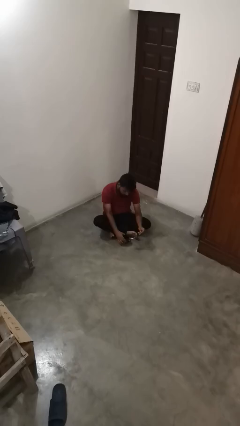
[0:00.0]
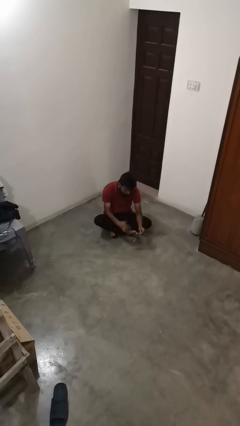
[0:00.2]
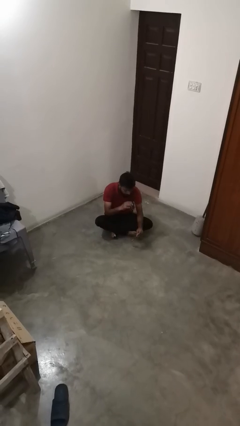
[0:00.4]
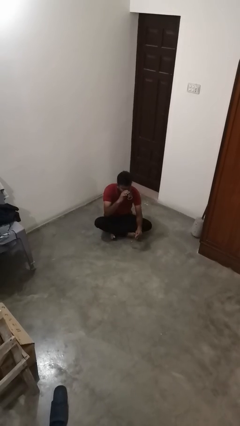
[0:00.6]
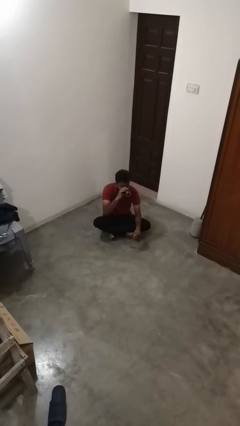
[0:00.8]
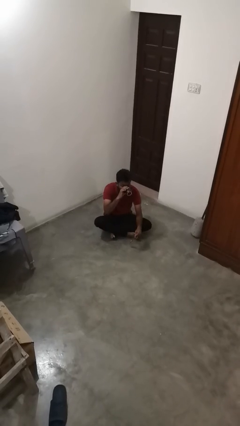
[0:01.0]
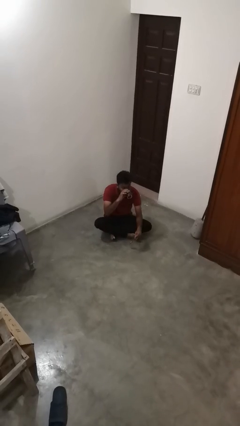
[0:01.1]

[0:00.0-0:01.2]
person drinks from mug

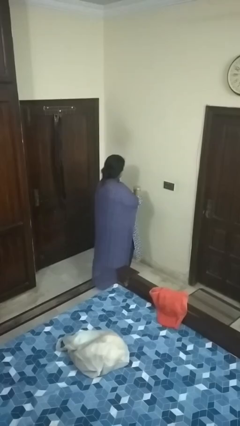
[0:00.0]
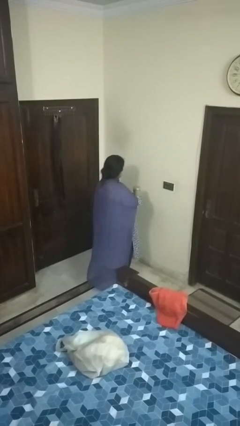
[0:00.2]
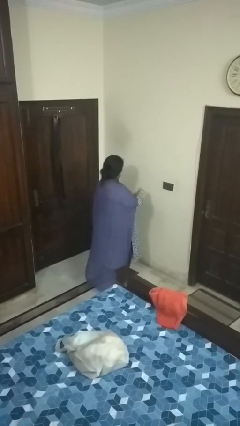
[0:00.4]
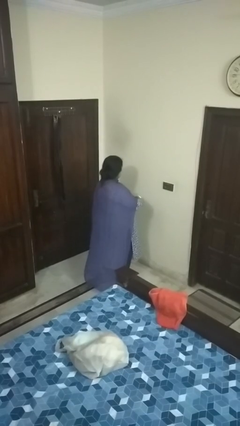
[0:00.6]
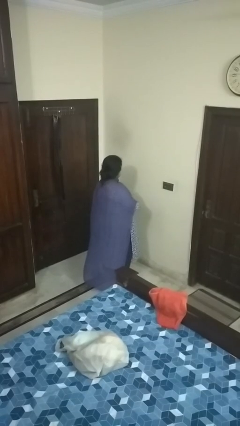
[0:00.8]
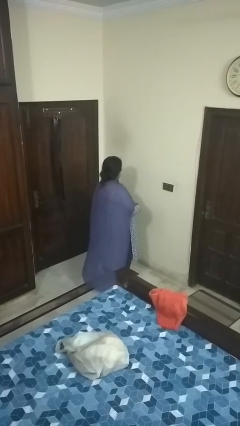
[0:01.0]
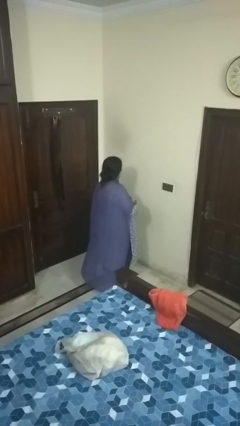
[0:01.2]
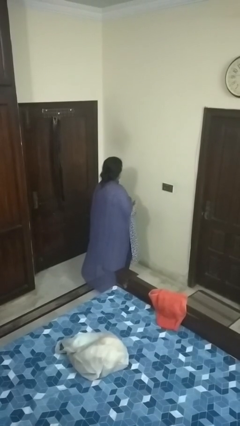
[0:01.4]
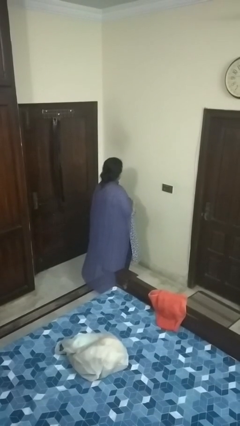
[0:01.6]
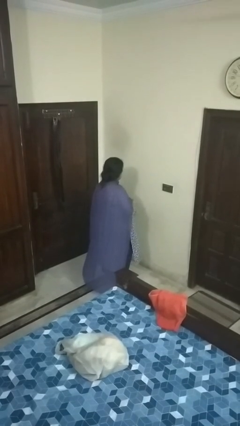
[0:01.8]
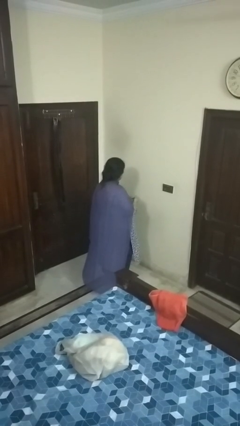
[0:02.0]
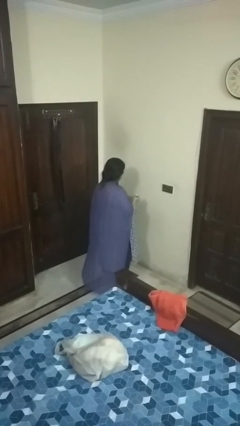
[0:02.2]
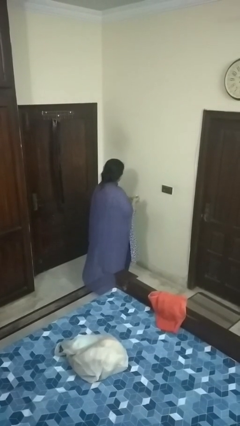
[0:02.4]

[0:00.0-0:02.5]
person takes off wristwatch

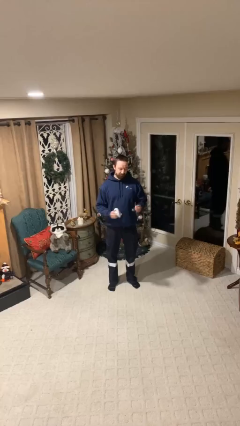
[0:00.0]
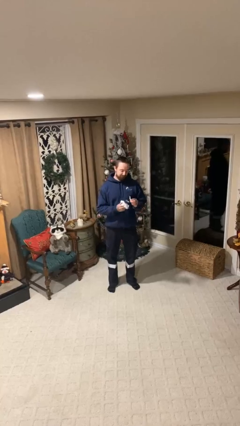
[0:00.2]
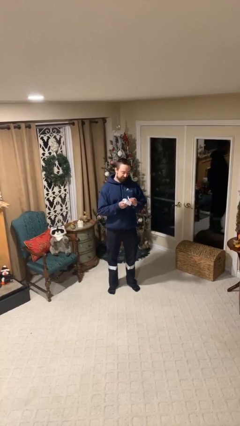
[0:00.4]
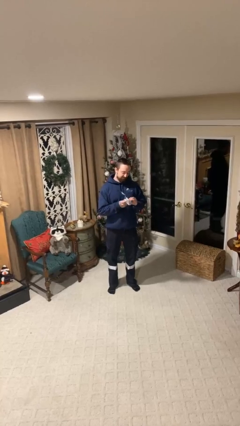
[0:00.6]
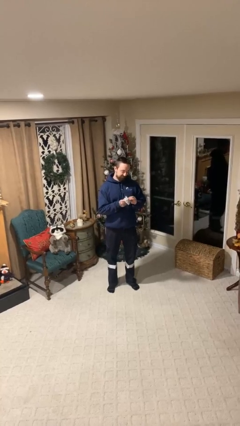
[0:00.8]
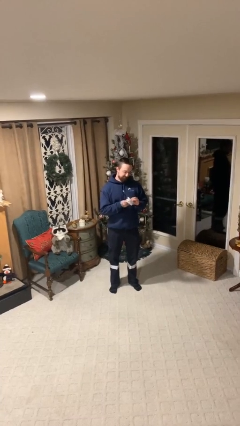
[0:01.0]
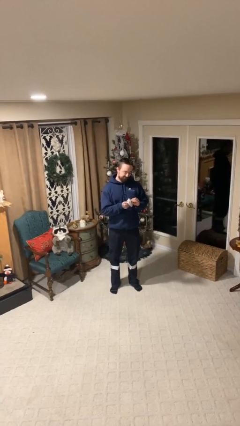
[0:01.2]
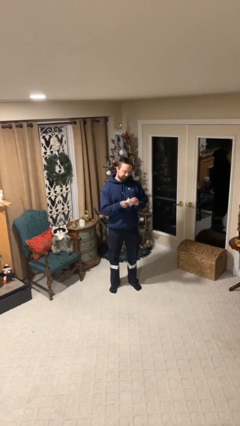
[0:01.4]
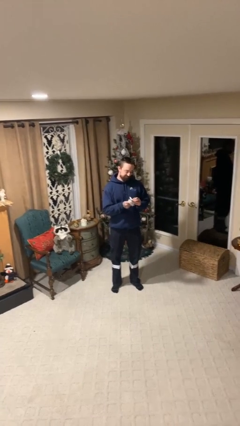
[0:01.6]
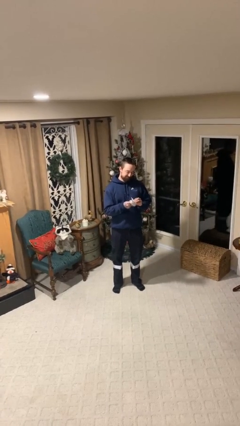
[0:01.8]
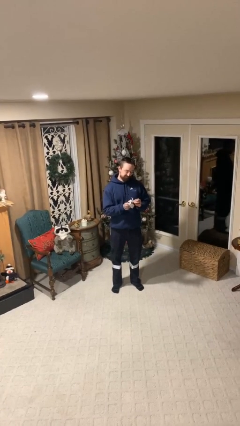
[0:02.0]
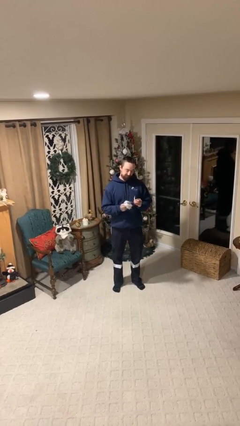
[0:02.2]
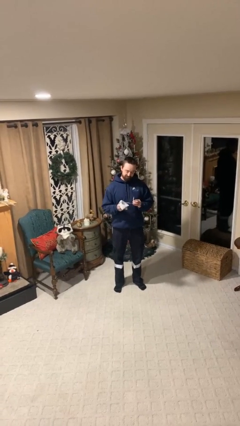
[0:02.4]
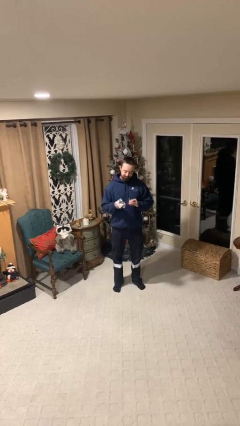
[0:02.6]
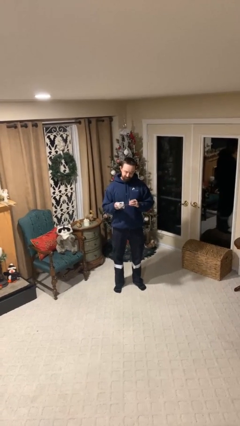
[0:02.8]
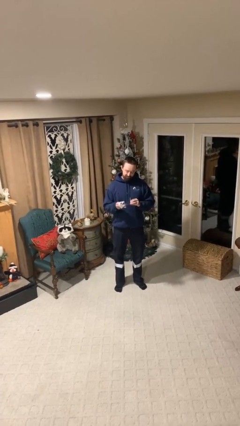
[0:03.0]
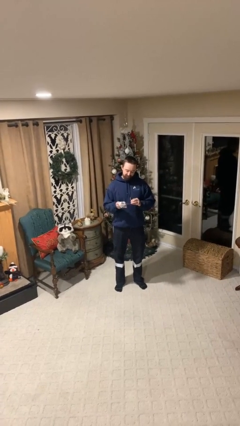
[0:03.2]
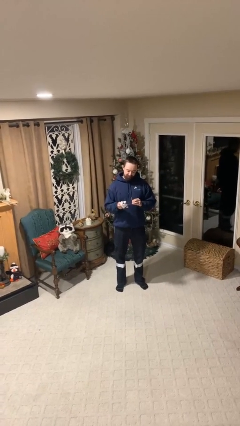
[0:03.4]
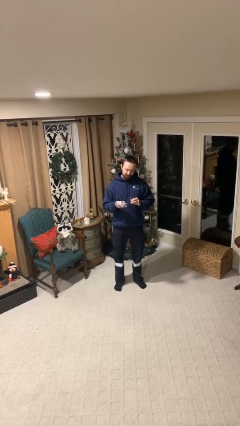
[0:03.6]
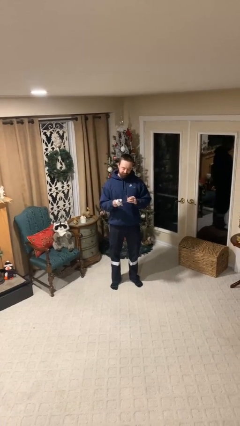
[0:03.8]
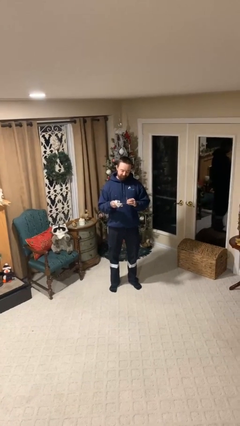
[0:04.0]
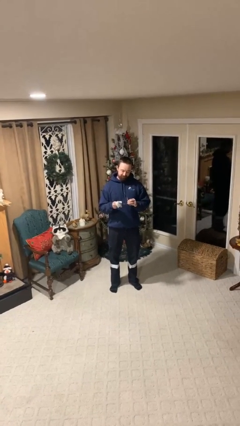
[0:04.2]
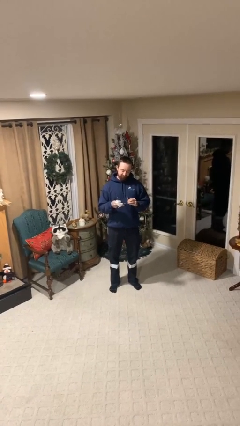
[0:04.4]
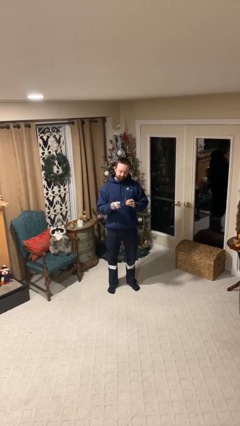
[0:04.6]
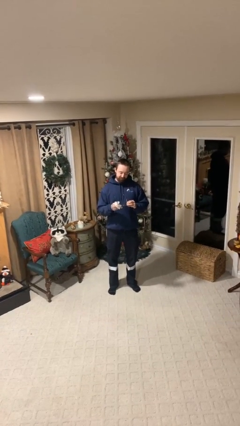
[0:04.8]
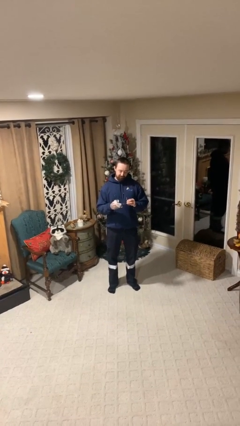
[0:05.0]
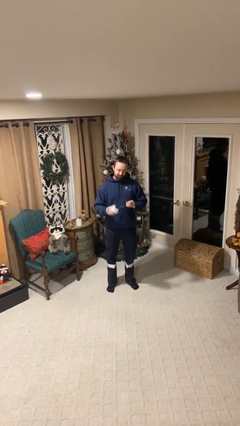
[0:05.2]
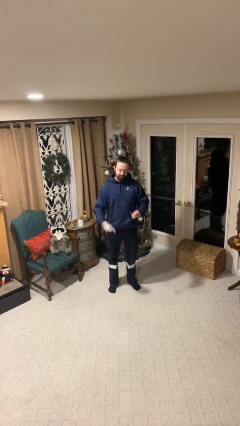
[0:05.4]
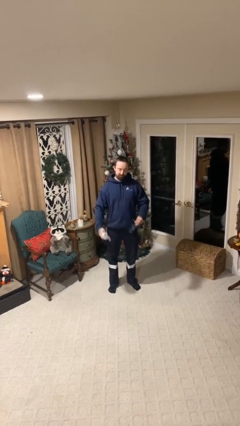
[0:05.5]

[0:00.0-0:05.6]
person cleans eyeglasses

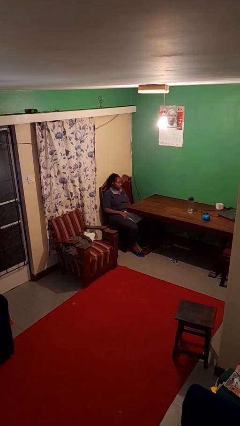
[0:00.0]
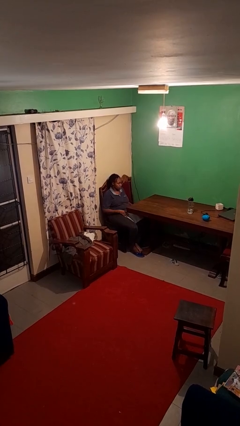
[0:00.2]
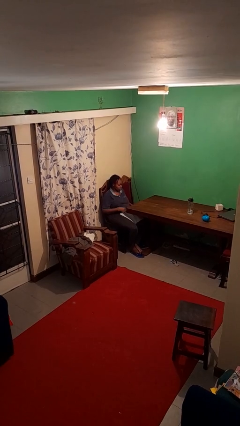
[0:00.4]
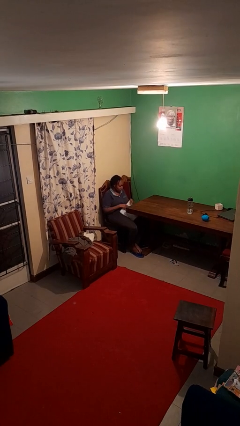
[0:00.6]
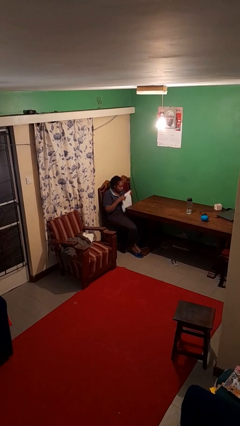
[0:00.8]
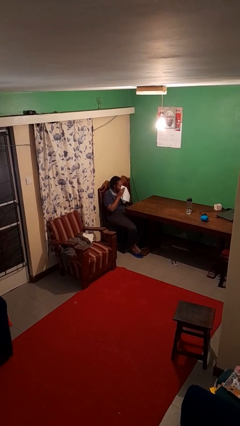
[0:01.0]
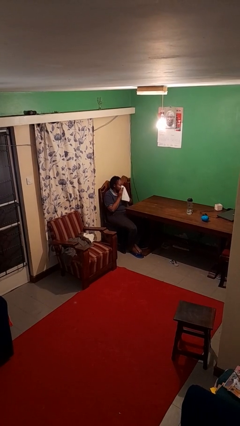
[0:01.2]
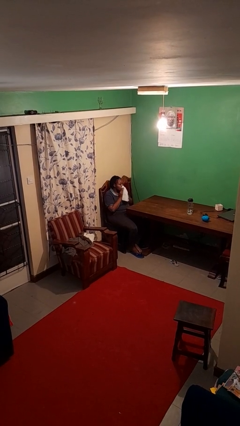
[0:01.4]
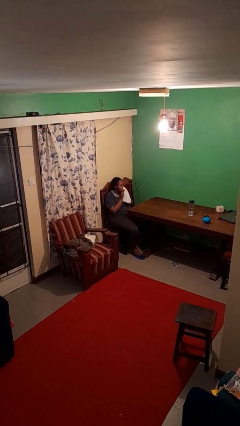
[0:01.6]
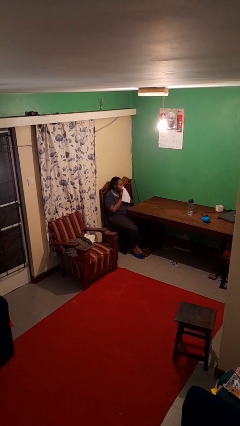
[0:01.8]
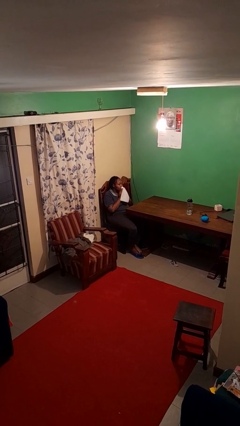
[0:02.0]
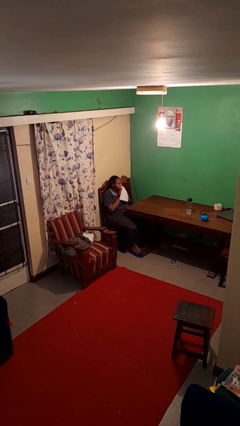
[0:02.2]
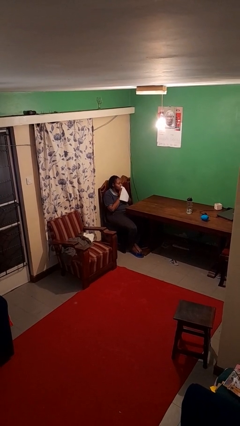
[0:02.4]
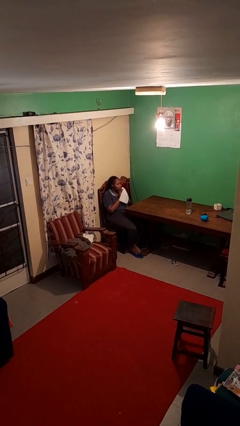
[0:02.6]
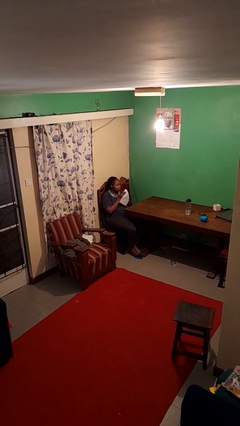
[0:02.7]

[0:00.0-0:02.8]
person wipes mouth with napkin

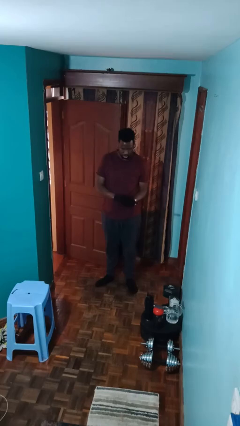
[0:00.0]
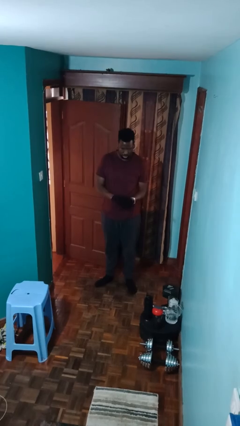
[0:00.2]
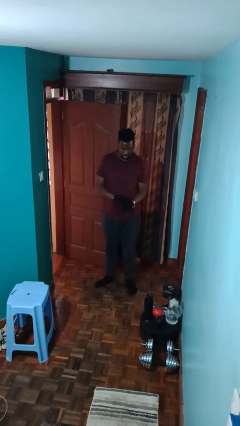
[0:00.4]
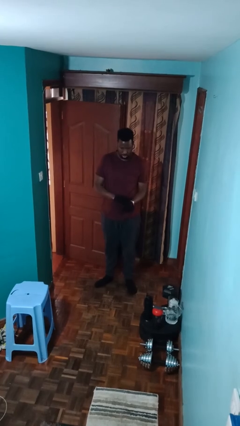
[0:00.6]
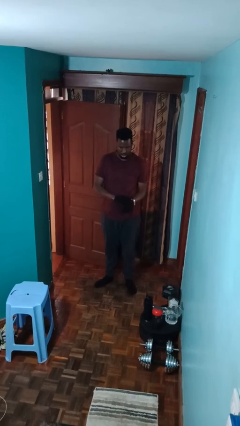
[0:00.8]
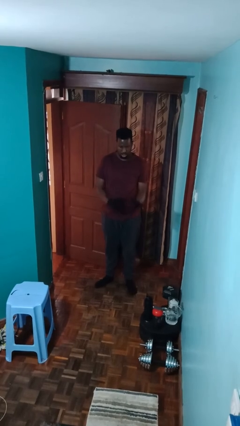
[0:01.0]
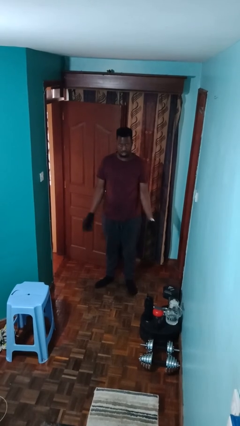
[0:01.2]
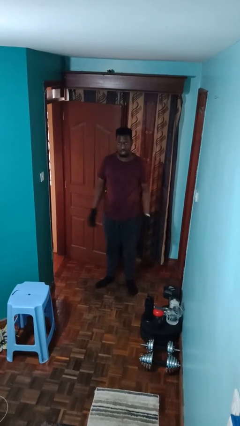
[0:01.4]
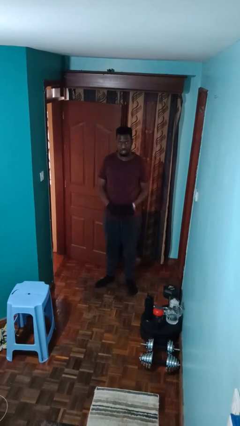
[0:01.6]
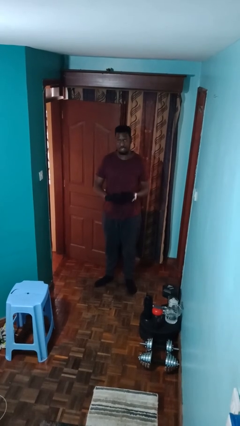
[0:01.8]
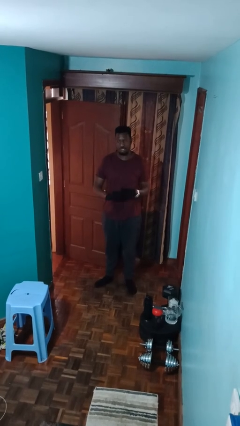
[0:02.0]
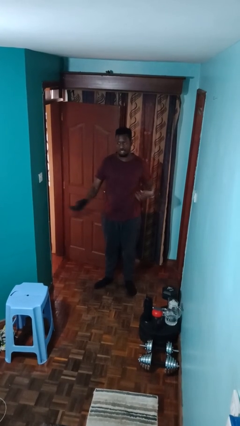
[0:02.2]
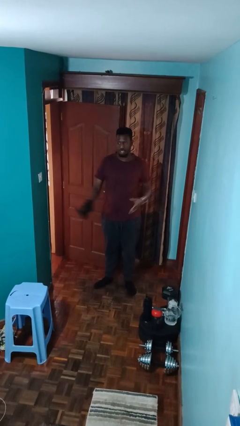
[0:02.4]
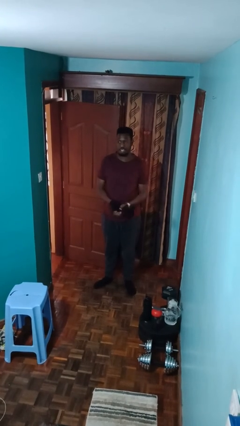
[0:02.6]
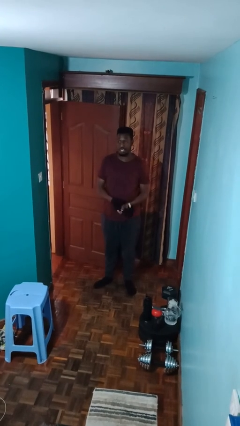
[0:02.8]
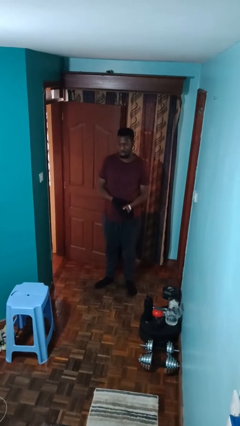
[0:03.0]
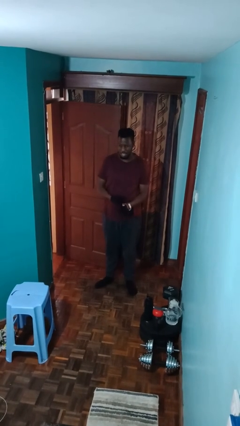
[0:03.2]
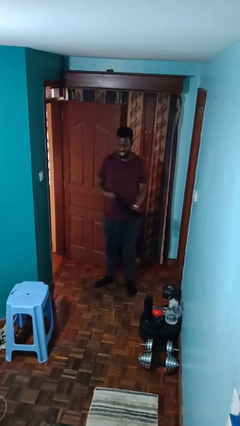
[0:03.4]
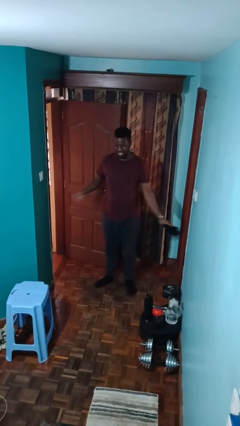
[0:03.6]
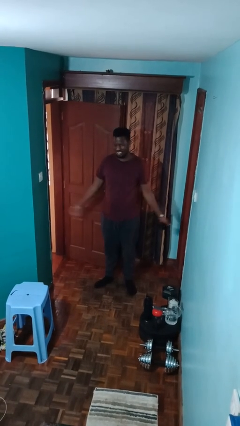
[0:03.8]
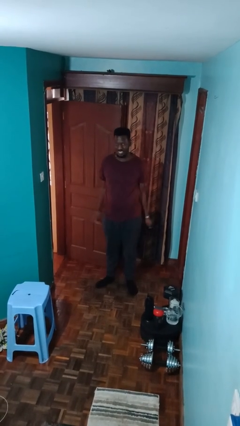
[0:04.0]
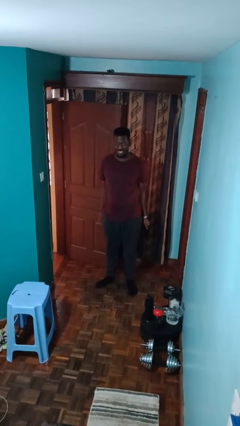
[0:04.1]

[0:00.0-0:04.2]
person takes off gloves

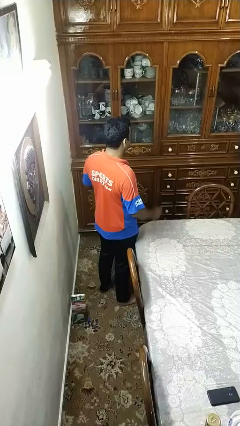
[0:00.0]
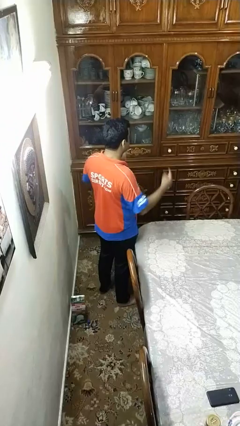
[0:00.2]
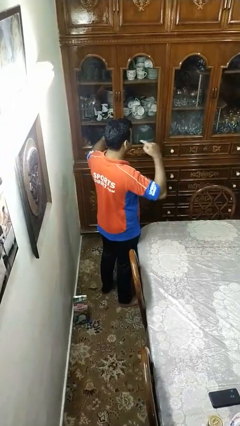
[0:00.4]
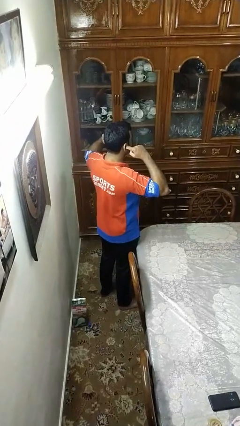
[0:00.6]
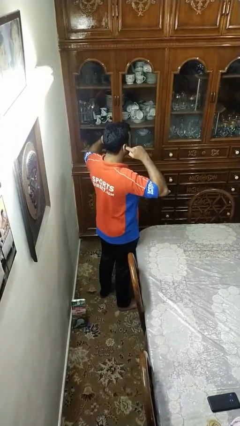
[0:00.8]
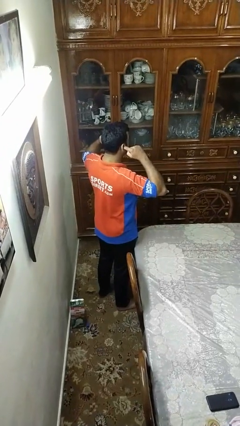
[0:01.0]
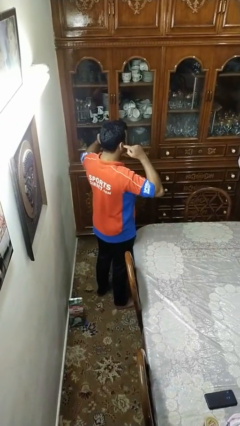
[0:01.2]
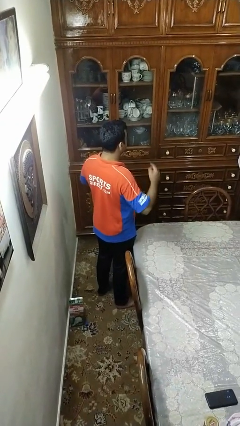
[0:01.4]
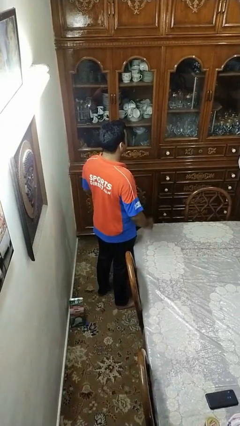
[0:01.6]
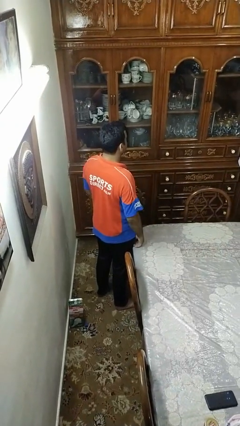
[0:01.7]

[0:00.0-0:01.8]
person puts fingers in ear
